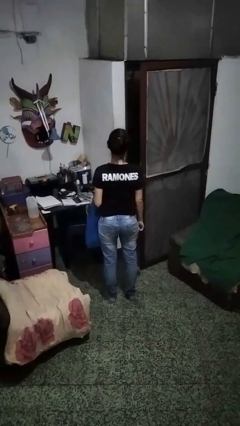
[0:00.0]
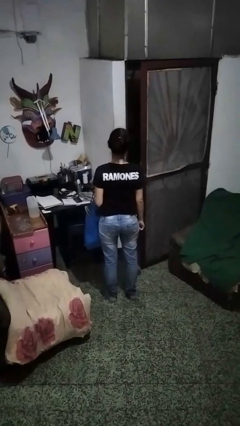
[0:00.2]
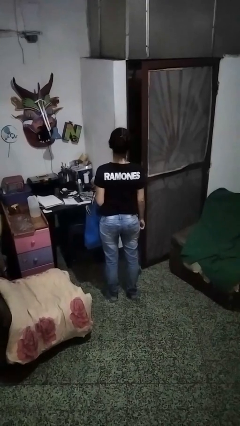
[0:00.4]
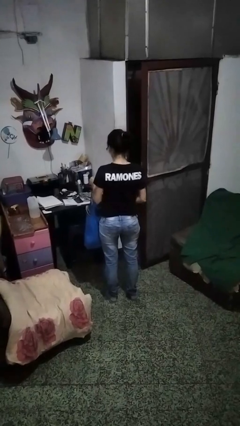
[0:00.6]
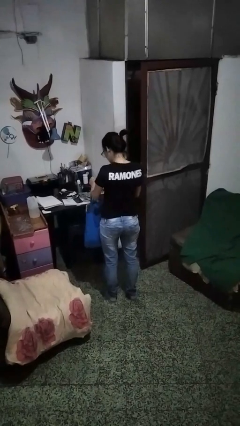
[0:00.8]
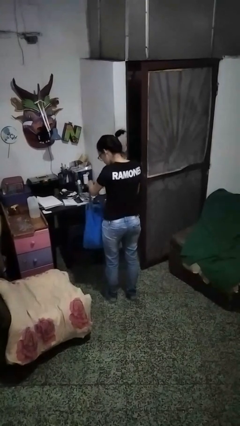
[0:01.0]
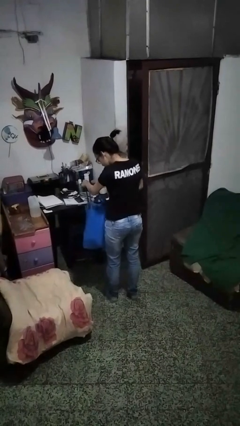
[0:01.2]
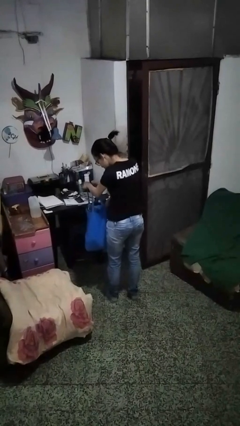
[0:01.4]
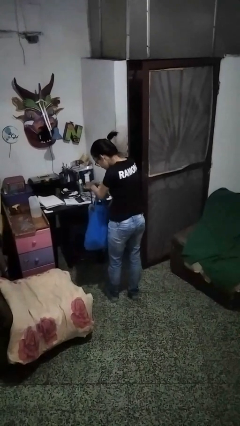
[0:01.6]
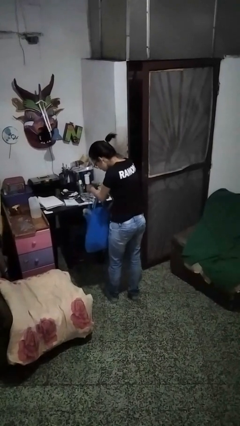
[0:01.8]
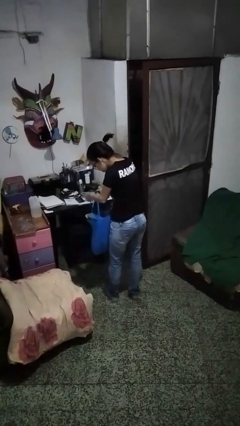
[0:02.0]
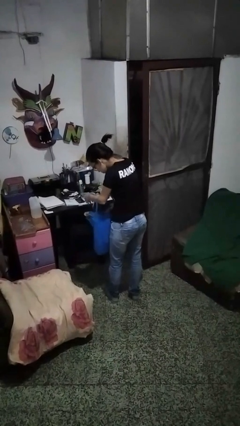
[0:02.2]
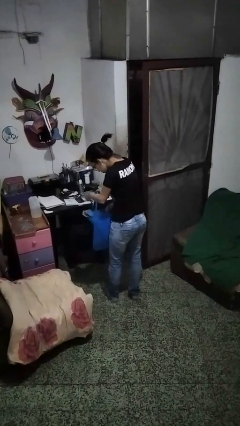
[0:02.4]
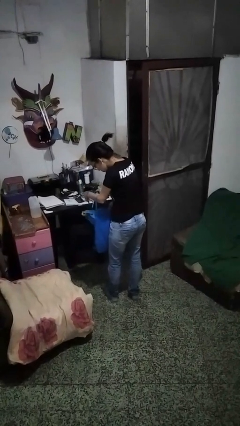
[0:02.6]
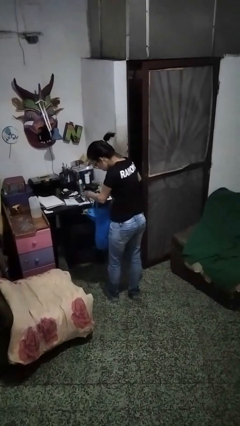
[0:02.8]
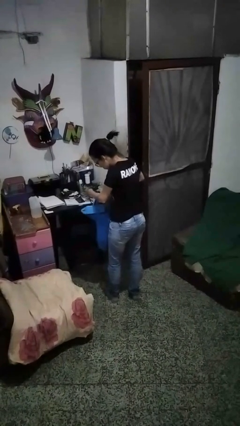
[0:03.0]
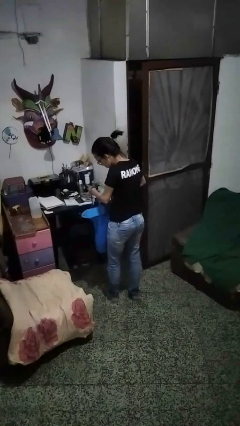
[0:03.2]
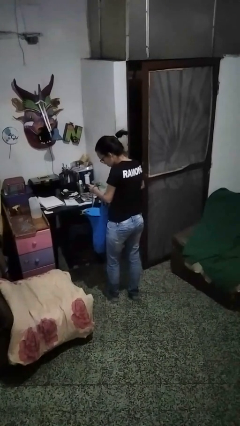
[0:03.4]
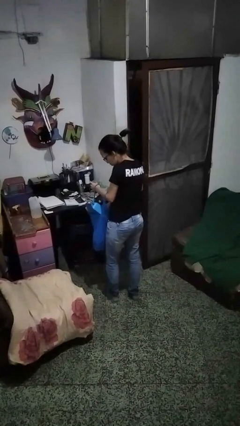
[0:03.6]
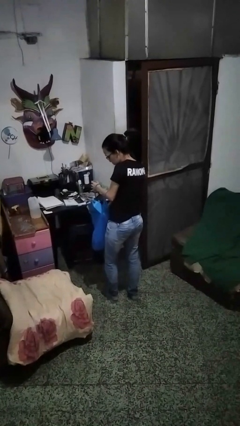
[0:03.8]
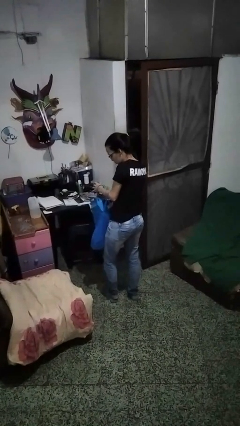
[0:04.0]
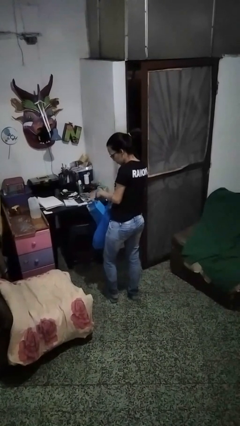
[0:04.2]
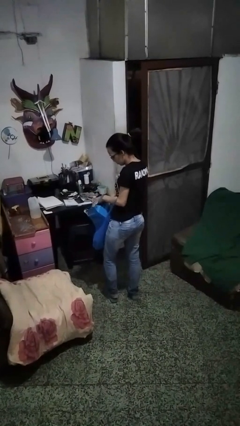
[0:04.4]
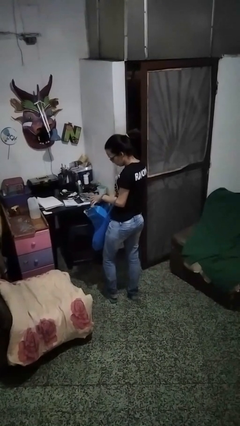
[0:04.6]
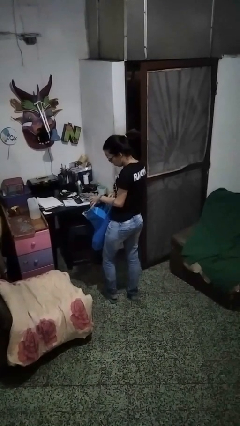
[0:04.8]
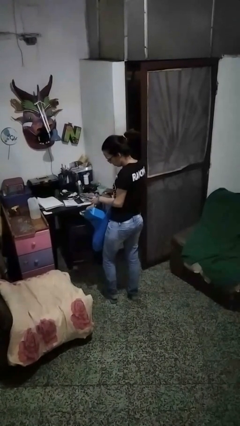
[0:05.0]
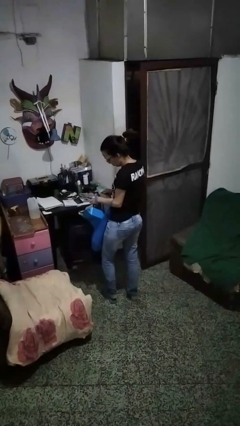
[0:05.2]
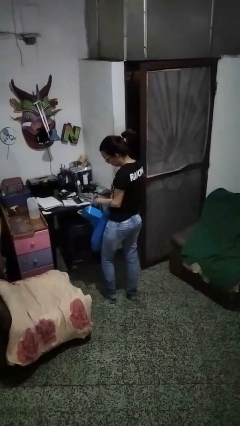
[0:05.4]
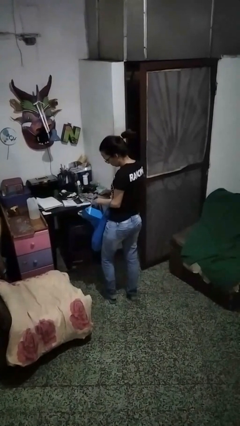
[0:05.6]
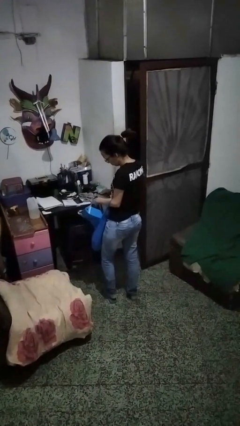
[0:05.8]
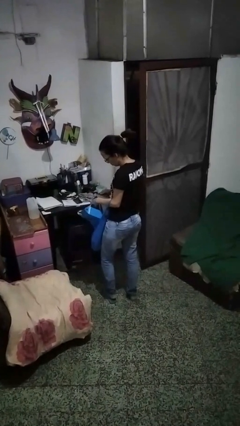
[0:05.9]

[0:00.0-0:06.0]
person takes object from bag

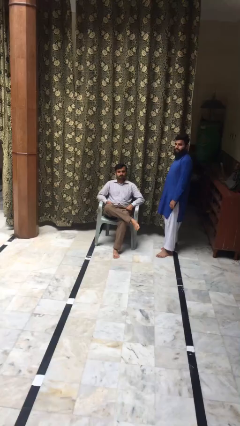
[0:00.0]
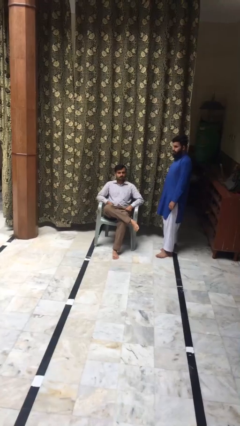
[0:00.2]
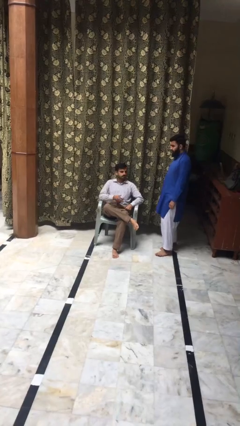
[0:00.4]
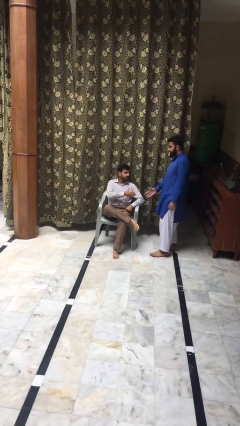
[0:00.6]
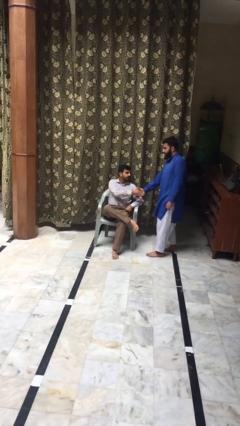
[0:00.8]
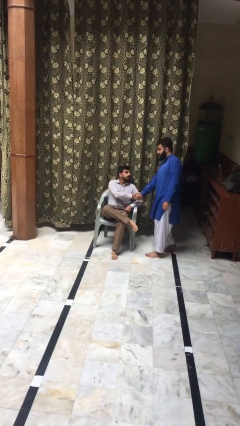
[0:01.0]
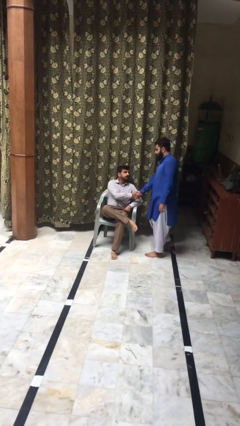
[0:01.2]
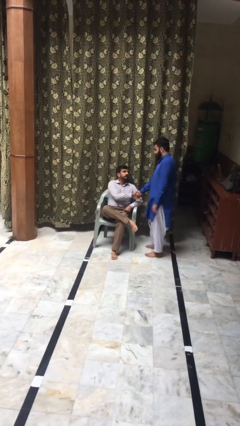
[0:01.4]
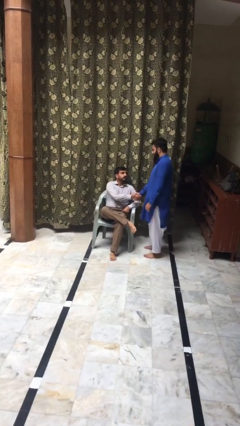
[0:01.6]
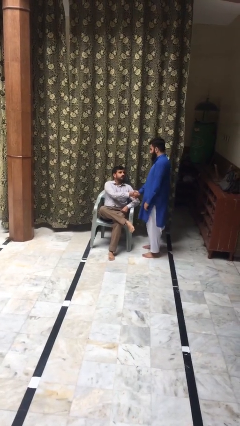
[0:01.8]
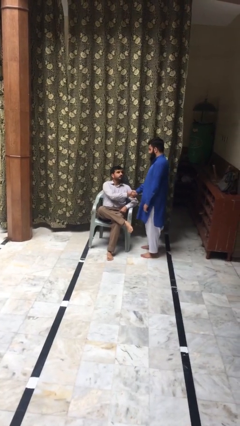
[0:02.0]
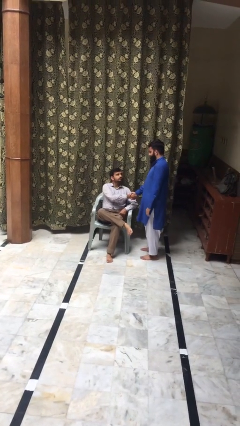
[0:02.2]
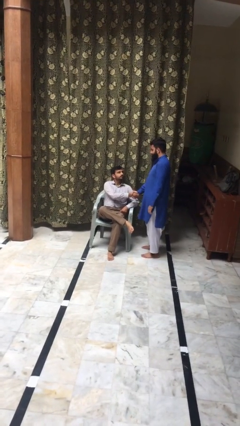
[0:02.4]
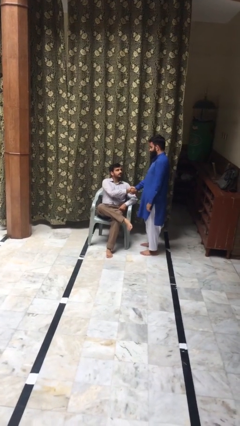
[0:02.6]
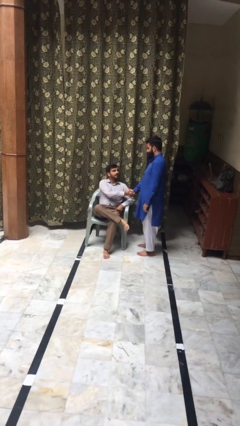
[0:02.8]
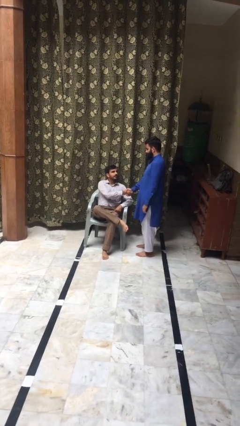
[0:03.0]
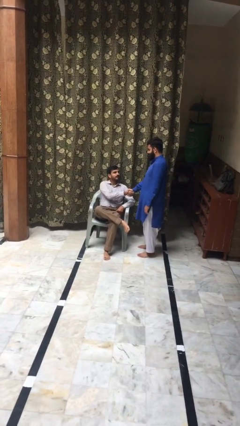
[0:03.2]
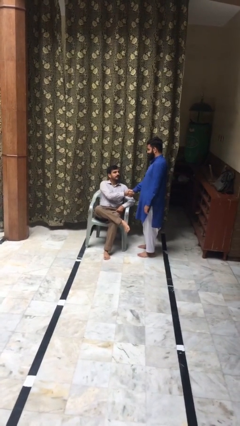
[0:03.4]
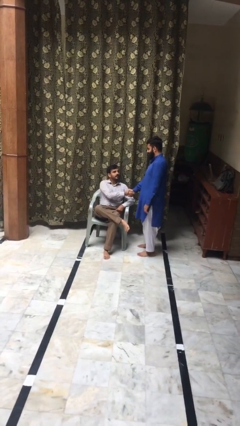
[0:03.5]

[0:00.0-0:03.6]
person shakes hand

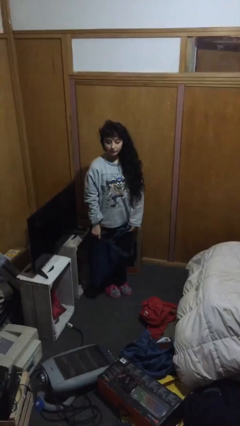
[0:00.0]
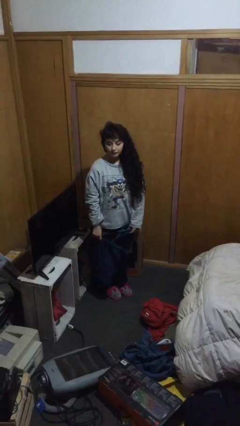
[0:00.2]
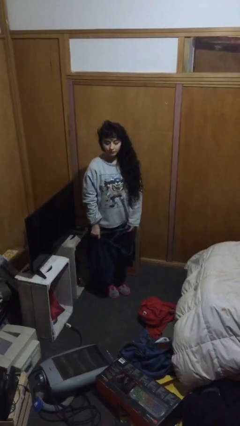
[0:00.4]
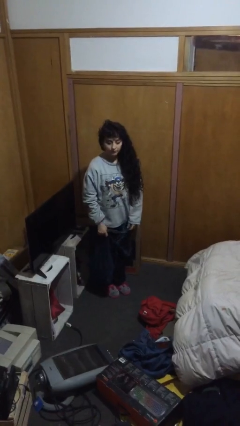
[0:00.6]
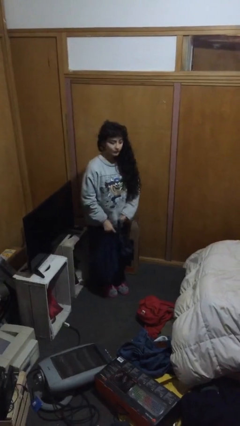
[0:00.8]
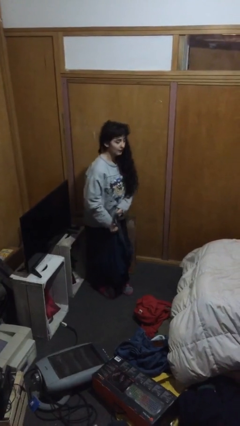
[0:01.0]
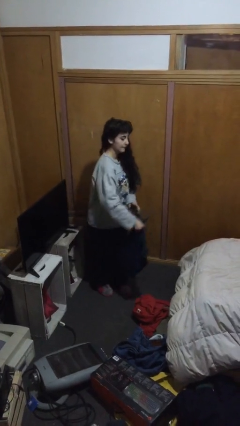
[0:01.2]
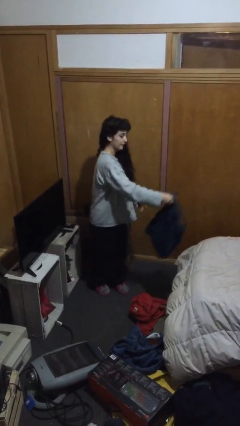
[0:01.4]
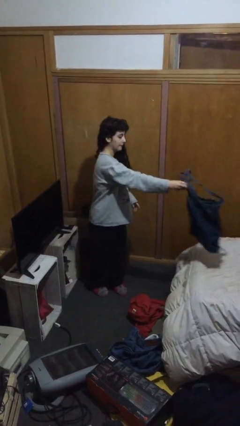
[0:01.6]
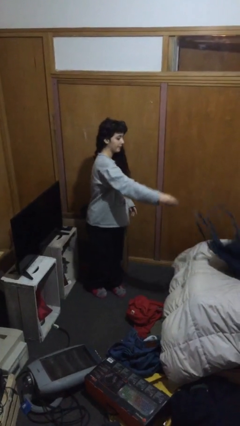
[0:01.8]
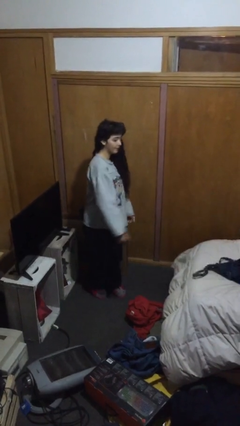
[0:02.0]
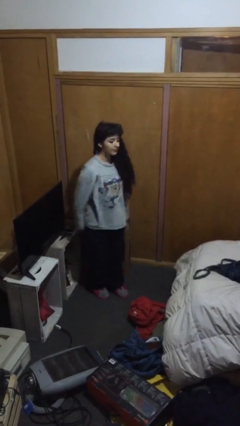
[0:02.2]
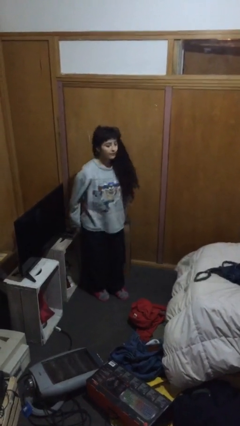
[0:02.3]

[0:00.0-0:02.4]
person throws object on bed

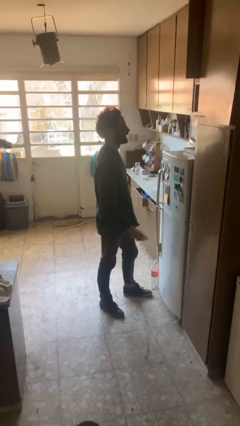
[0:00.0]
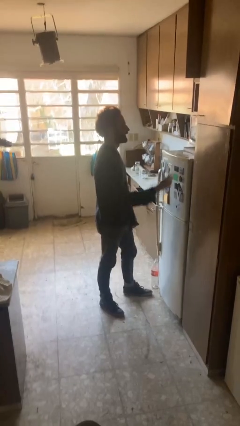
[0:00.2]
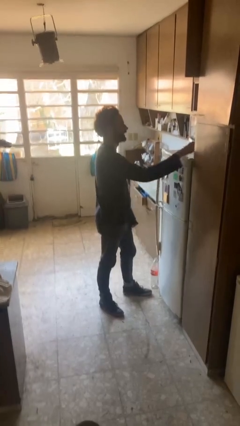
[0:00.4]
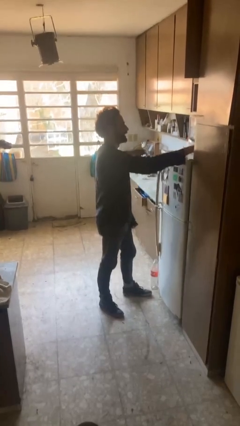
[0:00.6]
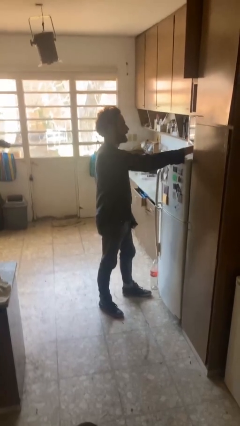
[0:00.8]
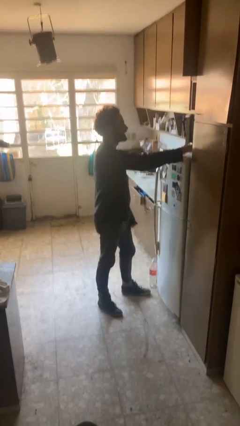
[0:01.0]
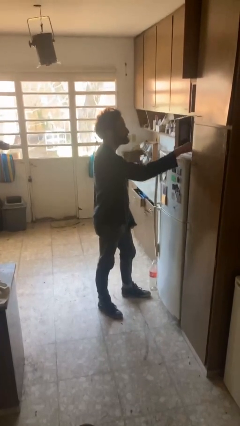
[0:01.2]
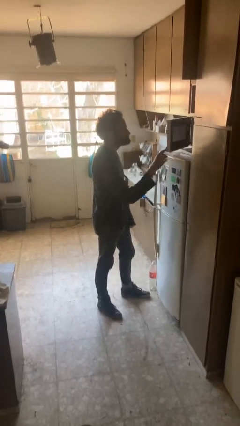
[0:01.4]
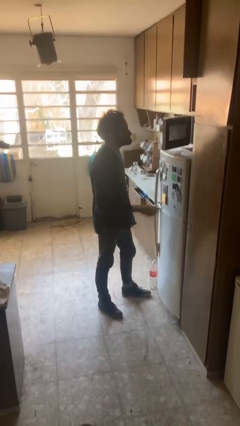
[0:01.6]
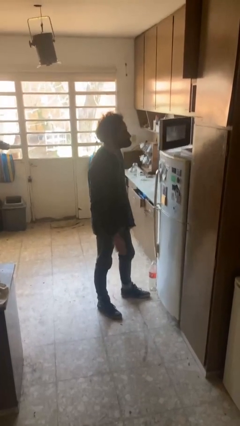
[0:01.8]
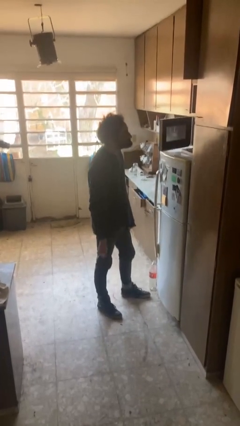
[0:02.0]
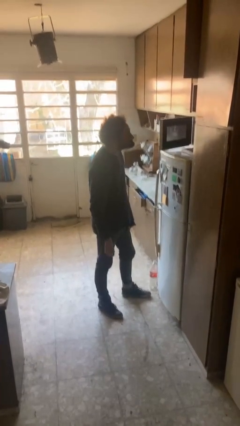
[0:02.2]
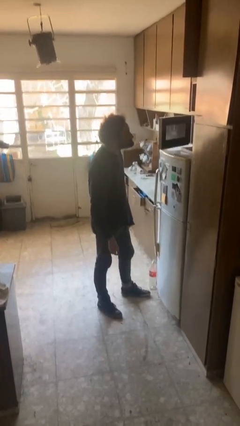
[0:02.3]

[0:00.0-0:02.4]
person opens microwave

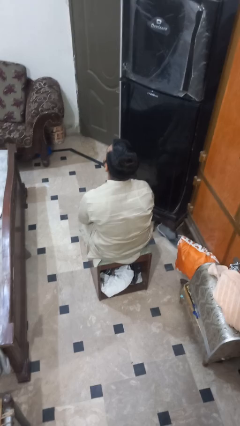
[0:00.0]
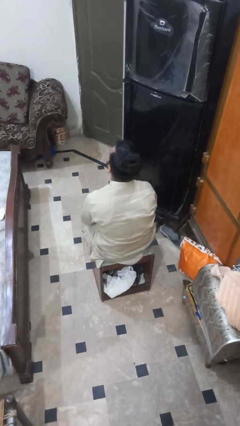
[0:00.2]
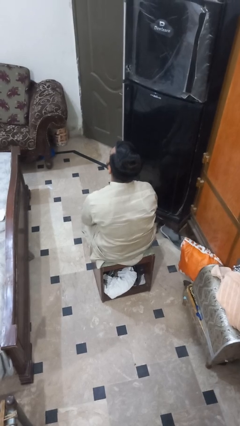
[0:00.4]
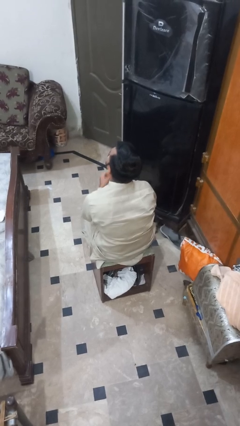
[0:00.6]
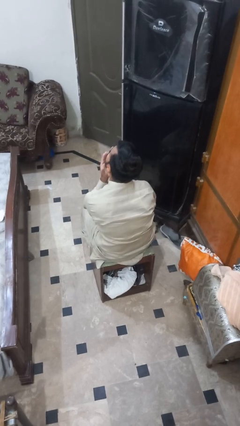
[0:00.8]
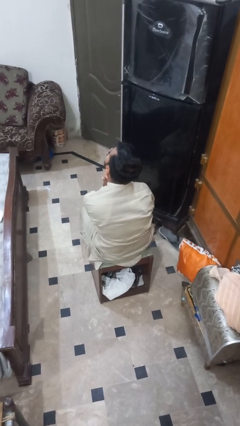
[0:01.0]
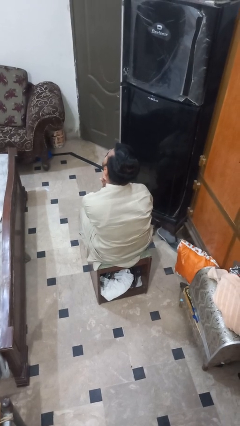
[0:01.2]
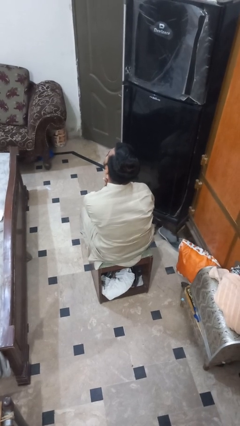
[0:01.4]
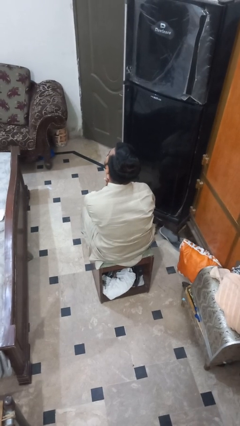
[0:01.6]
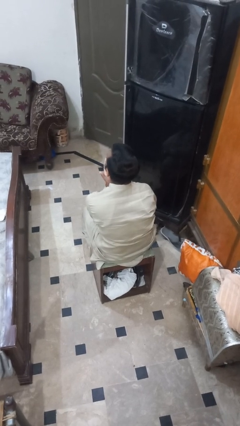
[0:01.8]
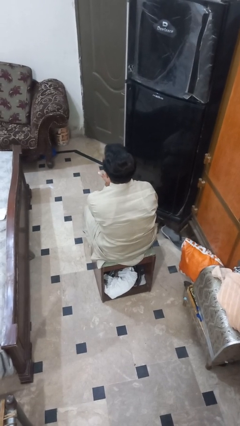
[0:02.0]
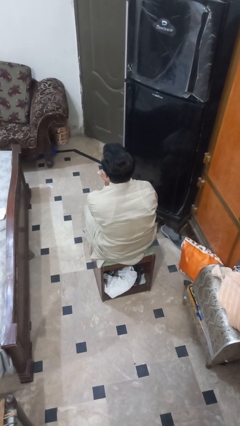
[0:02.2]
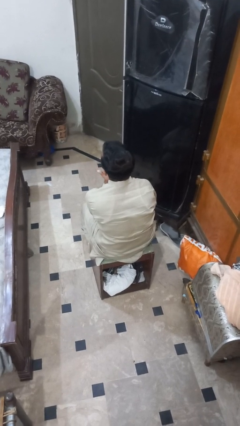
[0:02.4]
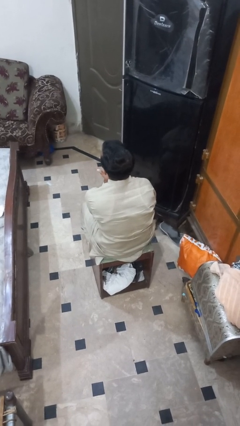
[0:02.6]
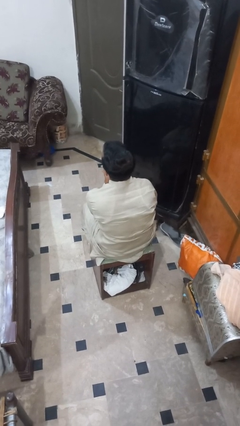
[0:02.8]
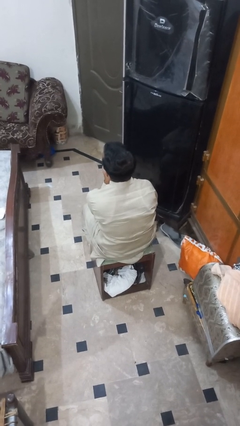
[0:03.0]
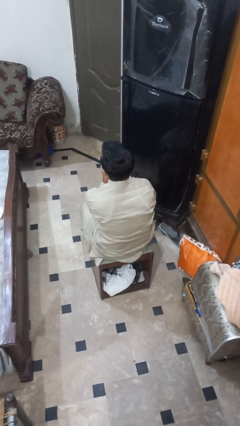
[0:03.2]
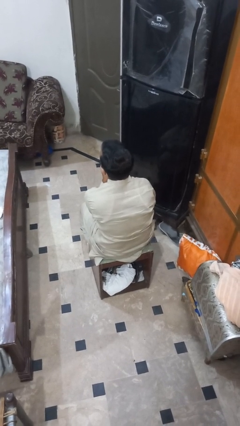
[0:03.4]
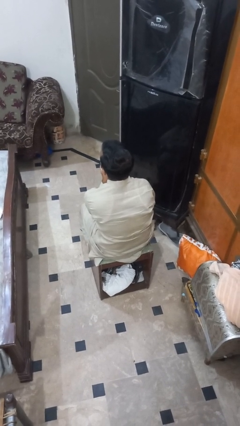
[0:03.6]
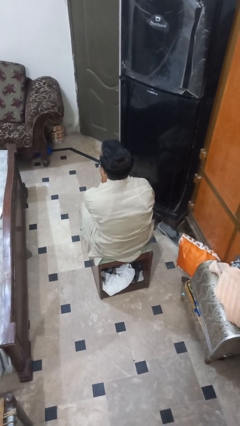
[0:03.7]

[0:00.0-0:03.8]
person strokes chin
